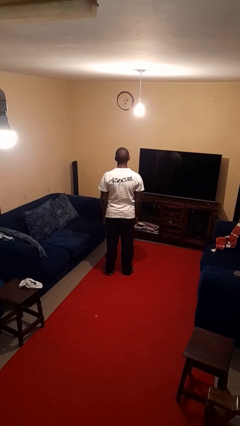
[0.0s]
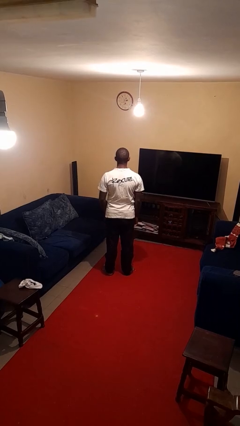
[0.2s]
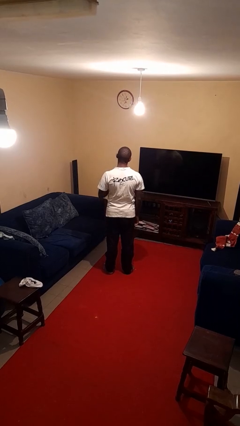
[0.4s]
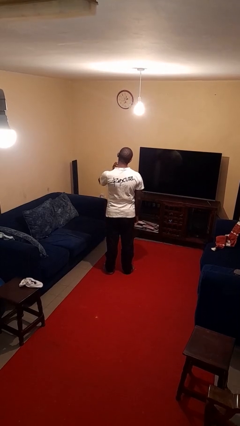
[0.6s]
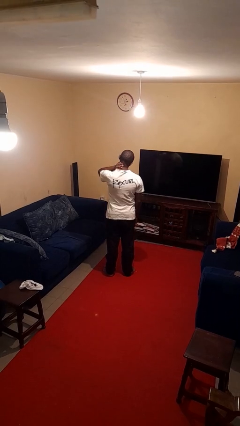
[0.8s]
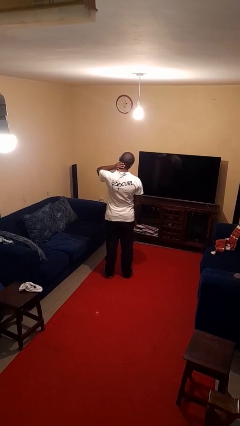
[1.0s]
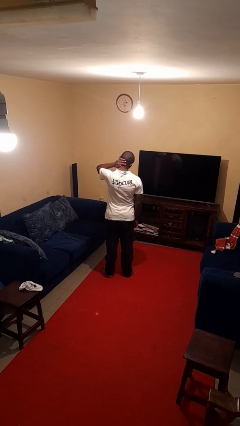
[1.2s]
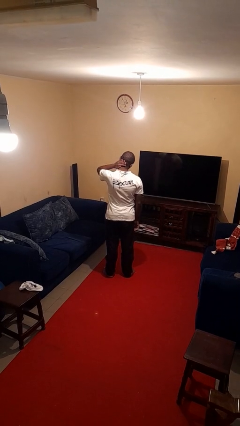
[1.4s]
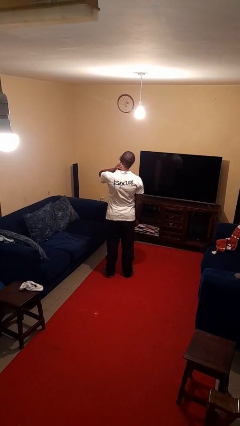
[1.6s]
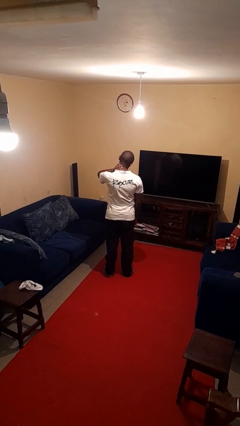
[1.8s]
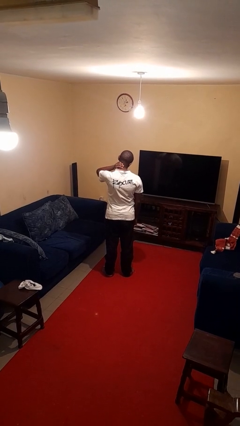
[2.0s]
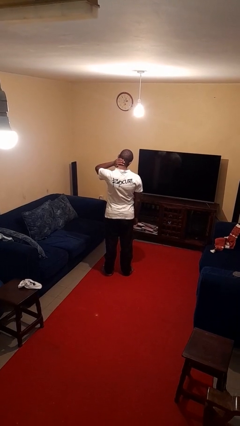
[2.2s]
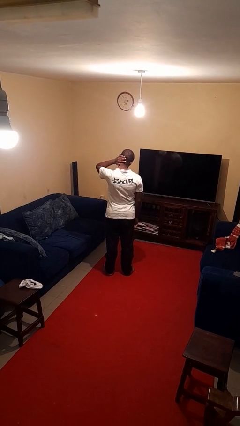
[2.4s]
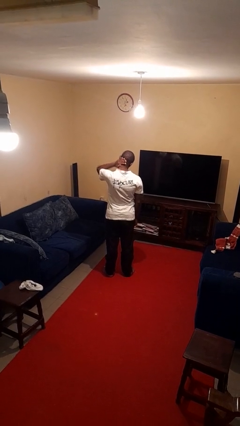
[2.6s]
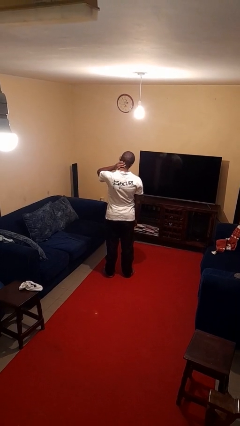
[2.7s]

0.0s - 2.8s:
person rubs neck

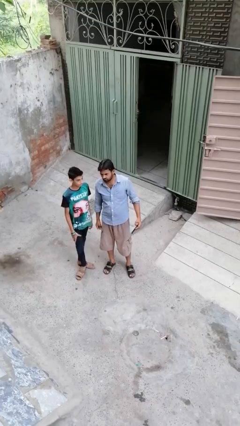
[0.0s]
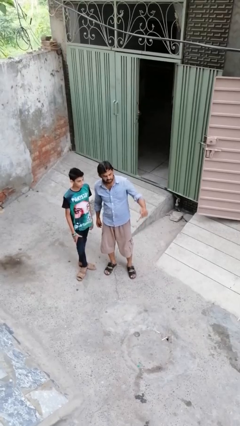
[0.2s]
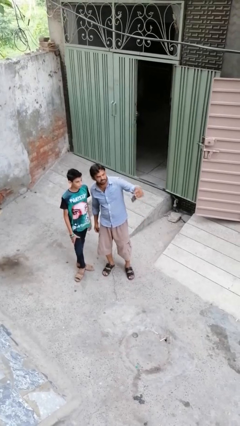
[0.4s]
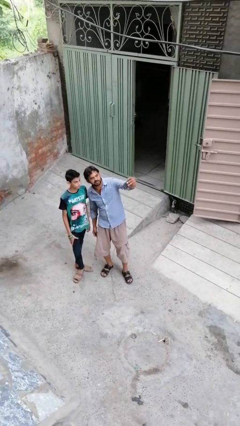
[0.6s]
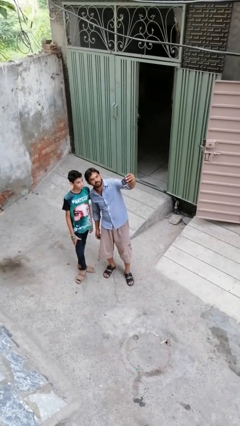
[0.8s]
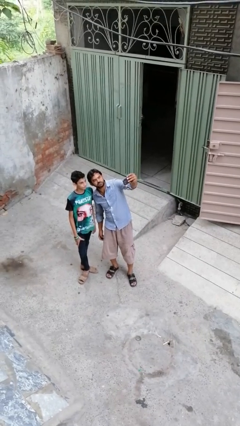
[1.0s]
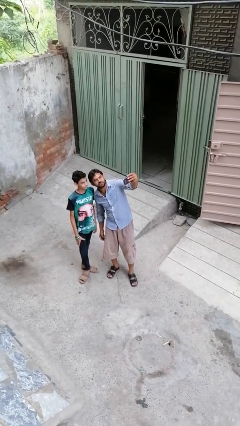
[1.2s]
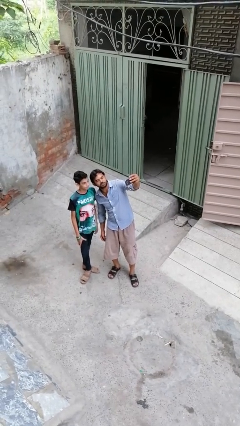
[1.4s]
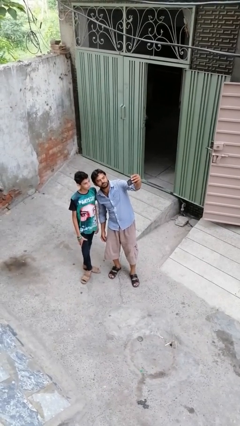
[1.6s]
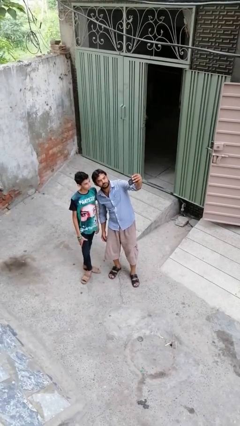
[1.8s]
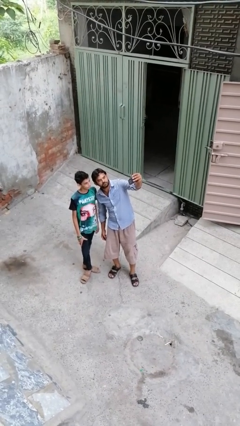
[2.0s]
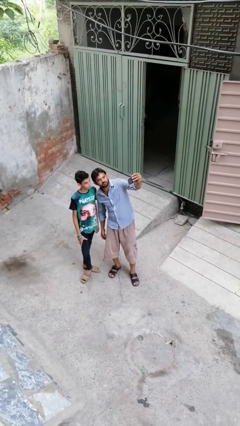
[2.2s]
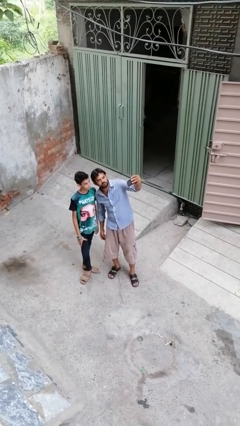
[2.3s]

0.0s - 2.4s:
person takes selfie with person

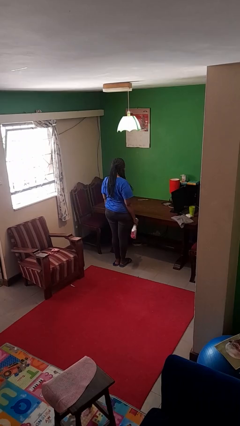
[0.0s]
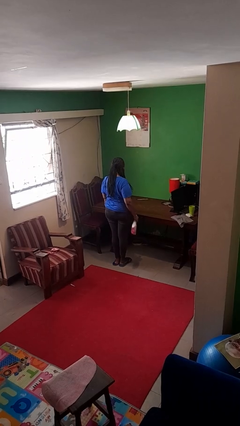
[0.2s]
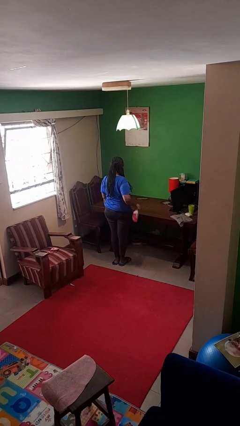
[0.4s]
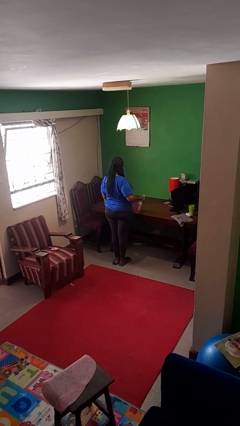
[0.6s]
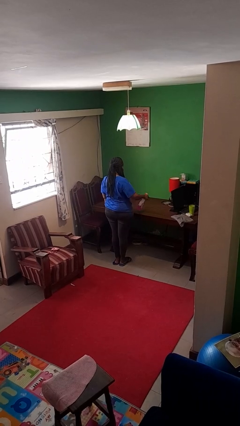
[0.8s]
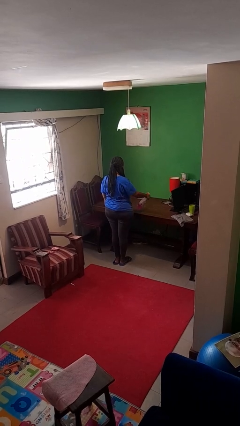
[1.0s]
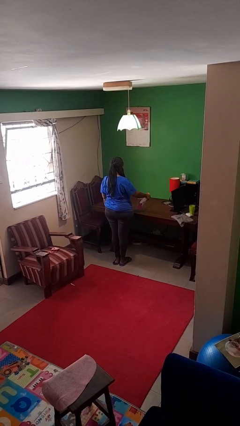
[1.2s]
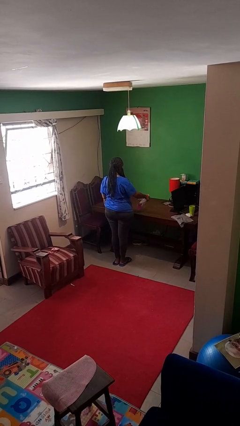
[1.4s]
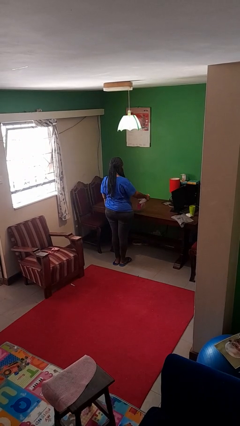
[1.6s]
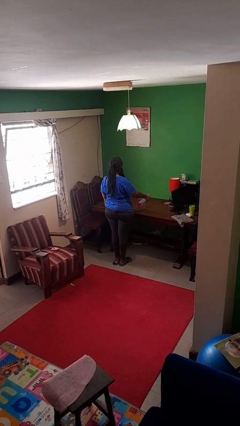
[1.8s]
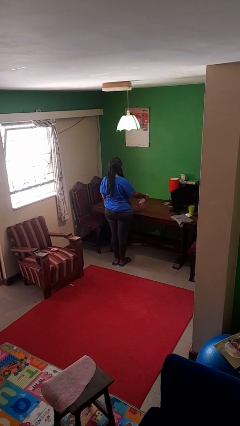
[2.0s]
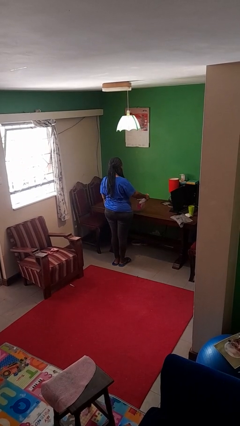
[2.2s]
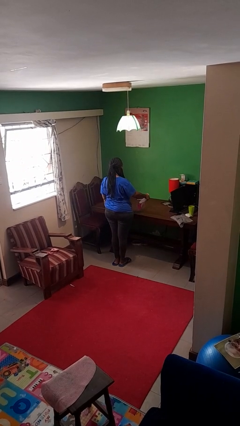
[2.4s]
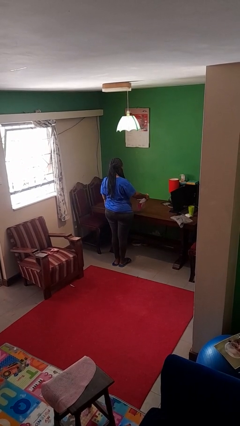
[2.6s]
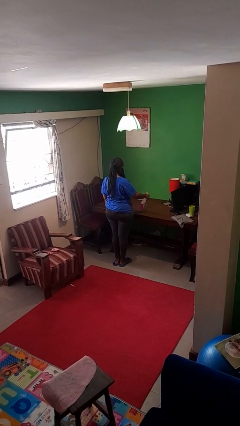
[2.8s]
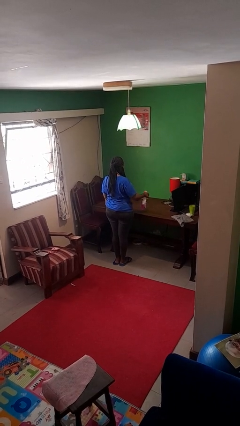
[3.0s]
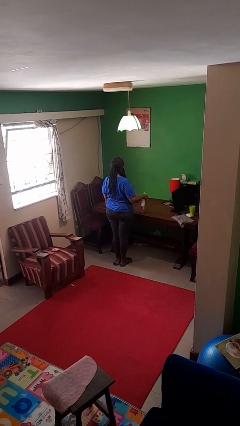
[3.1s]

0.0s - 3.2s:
person sprays from bottle

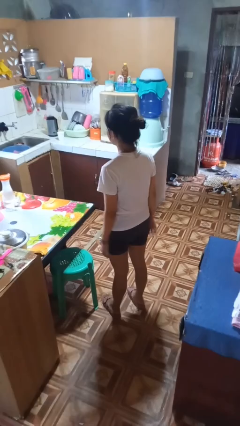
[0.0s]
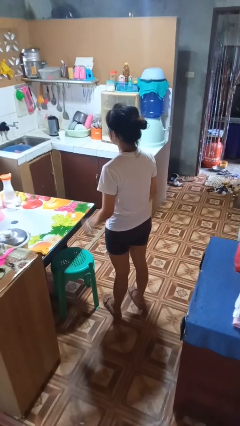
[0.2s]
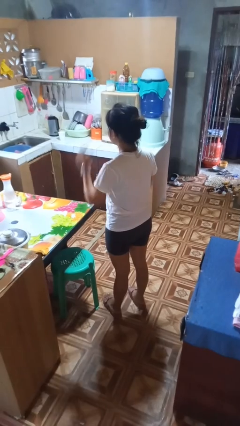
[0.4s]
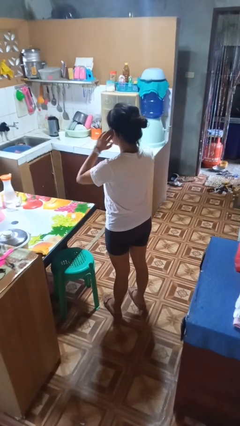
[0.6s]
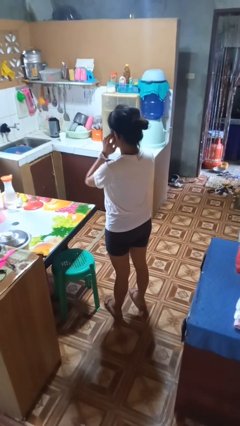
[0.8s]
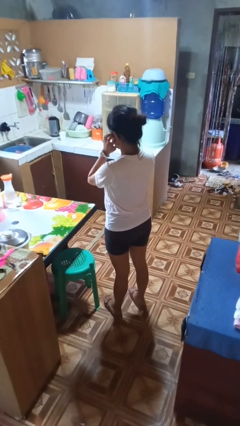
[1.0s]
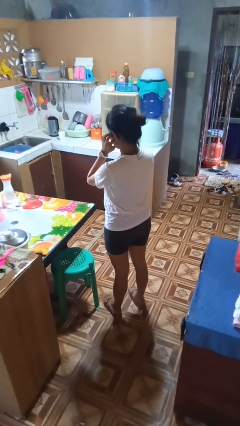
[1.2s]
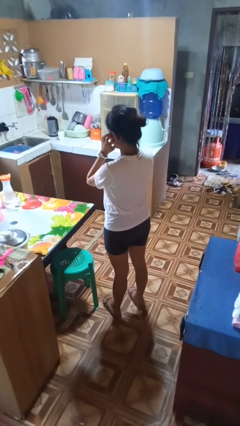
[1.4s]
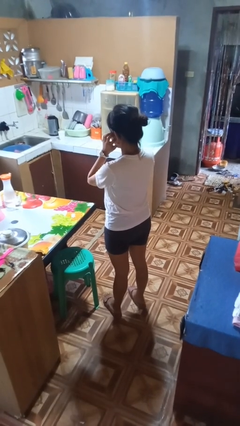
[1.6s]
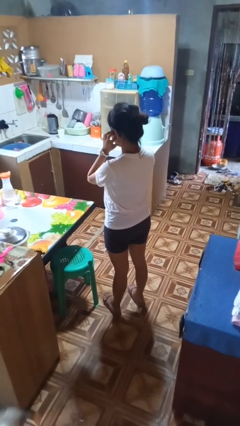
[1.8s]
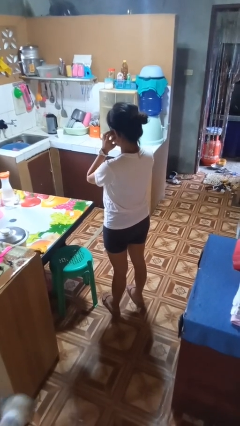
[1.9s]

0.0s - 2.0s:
person puts fingers in ear

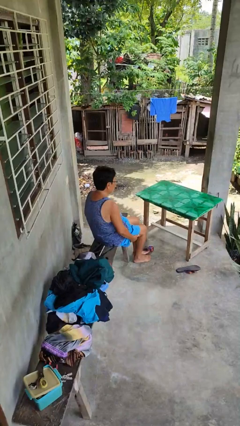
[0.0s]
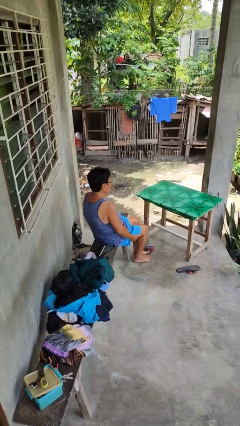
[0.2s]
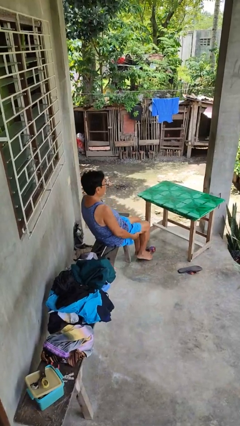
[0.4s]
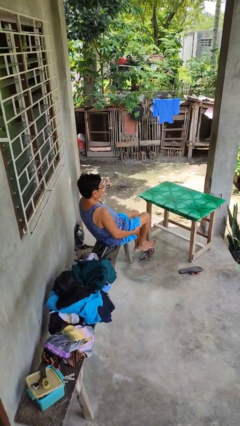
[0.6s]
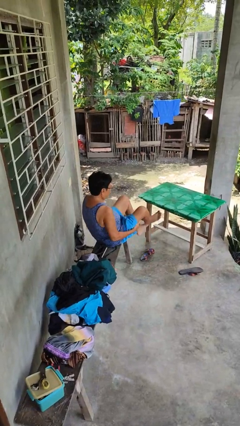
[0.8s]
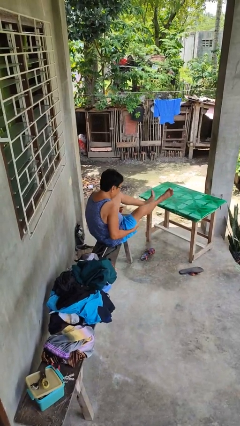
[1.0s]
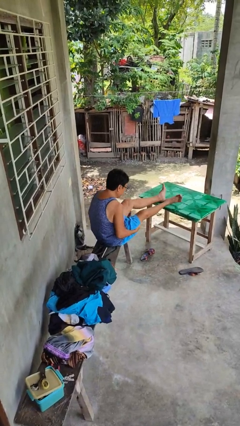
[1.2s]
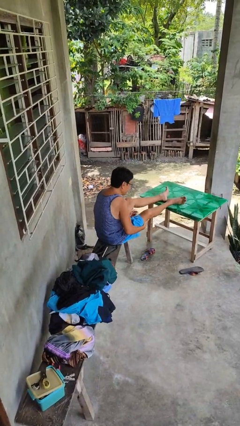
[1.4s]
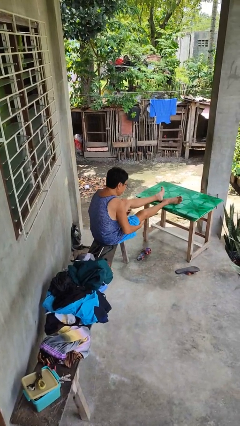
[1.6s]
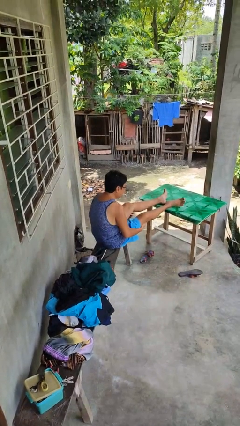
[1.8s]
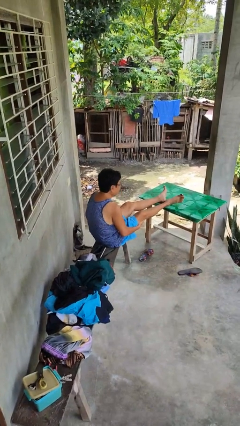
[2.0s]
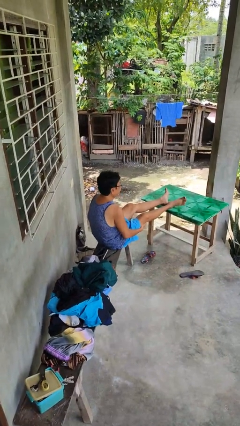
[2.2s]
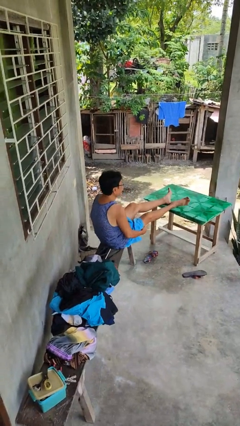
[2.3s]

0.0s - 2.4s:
person puts feet up

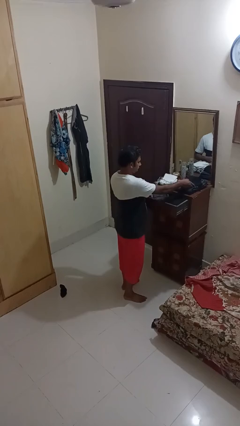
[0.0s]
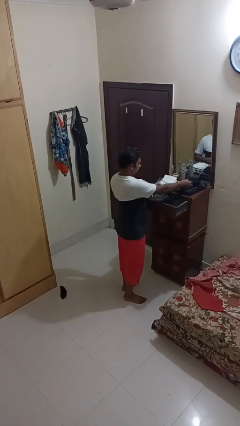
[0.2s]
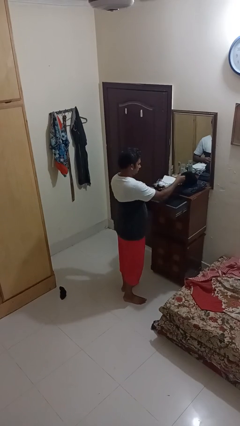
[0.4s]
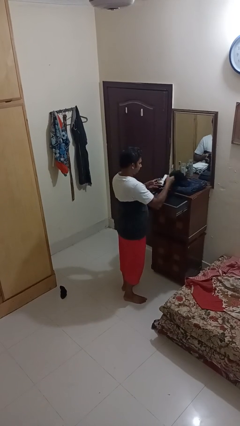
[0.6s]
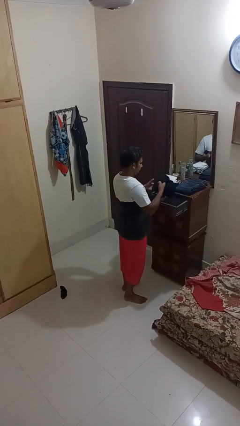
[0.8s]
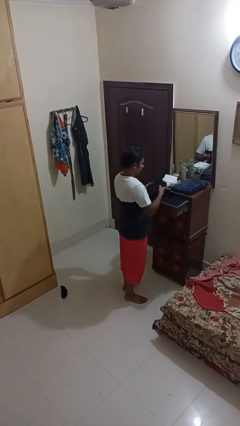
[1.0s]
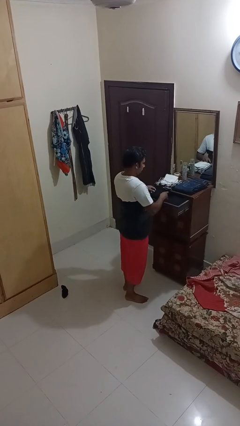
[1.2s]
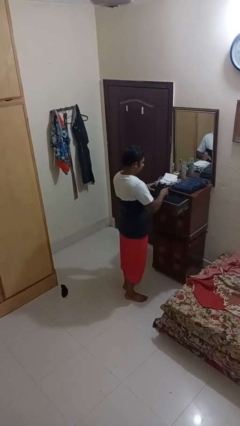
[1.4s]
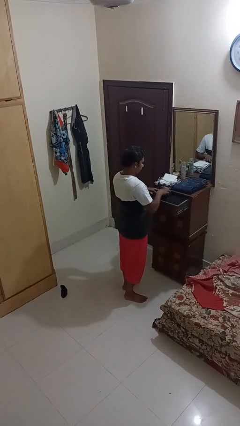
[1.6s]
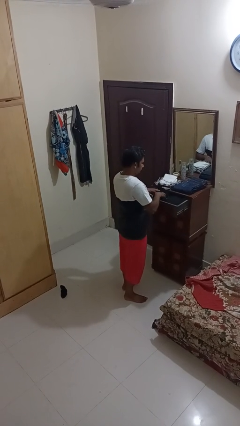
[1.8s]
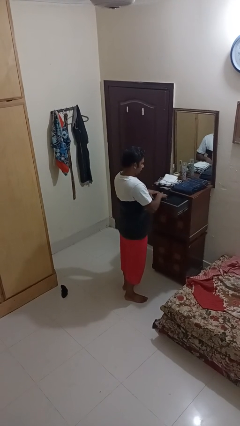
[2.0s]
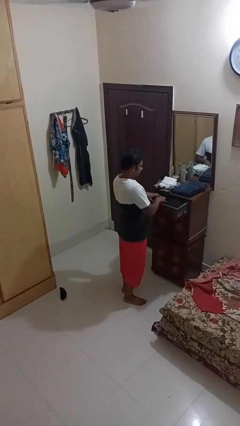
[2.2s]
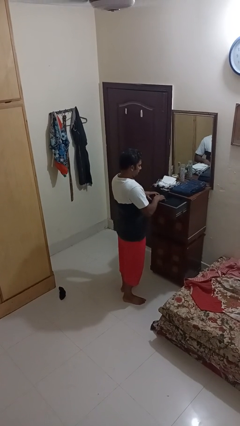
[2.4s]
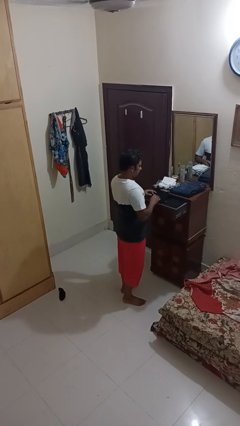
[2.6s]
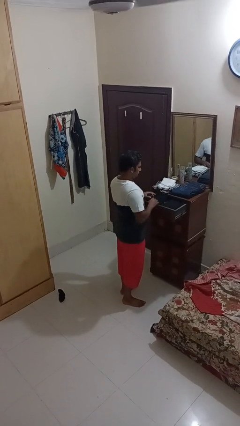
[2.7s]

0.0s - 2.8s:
person puts clothes into dresser

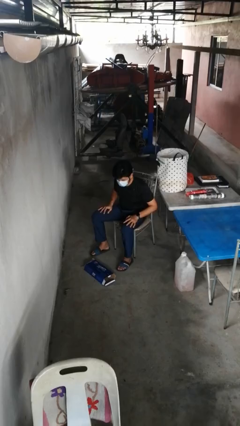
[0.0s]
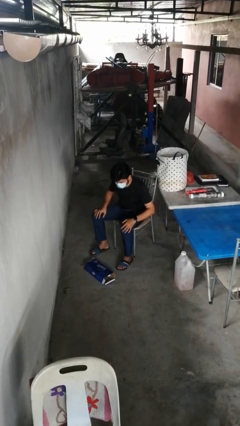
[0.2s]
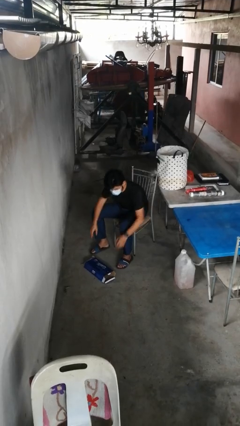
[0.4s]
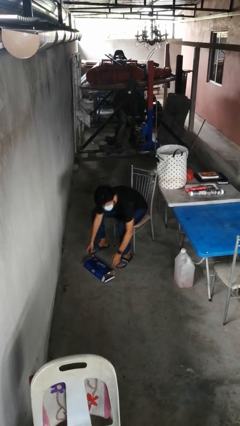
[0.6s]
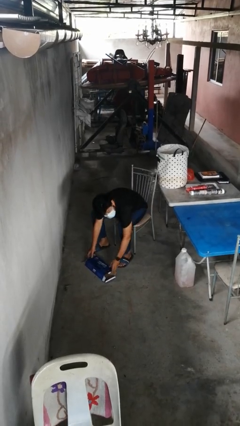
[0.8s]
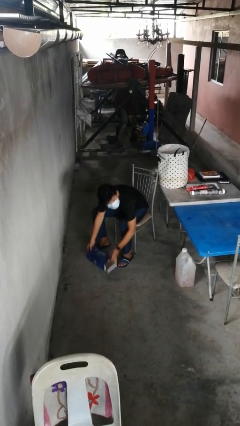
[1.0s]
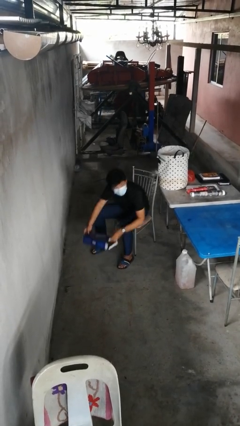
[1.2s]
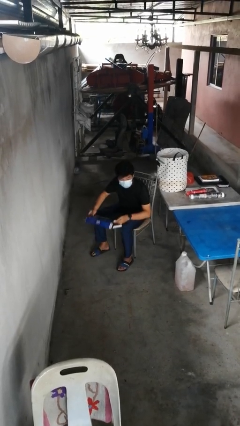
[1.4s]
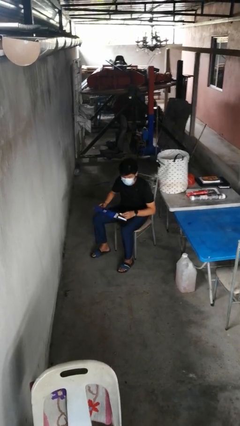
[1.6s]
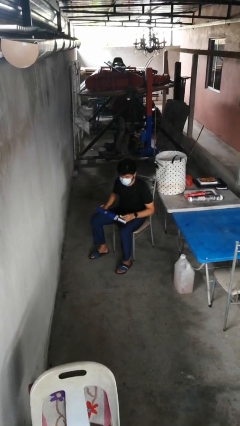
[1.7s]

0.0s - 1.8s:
person picks up object from floor
